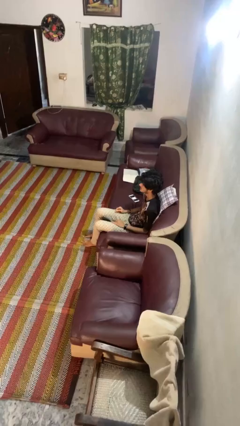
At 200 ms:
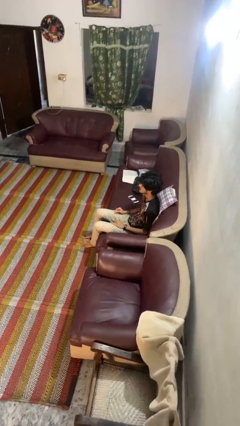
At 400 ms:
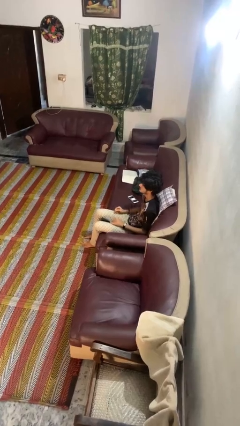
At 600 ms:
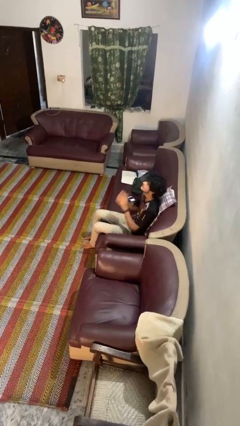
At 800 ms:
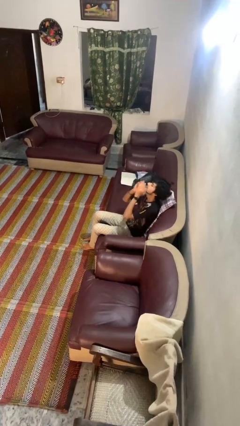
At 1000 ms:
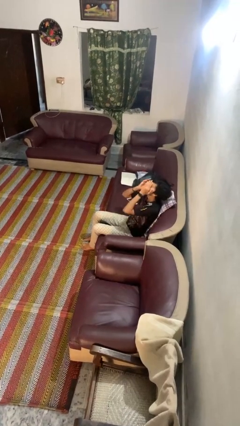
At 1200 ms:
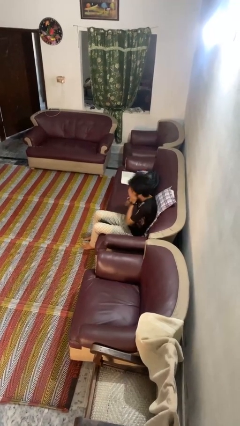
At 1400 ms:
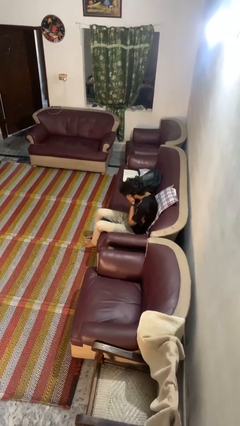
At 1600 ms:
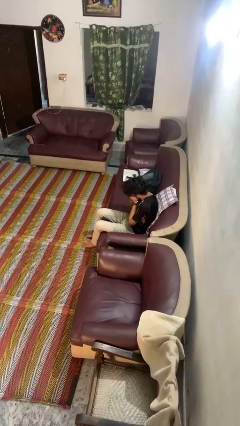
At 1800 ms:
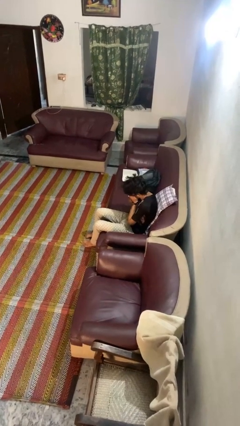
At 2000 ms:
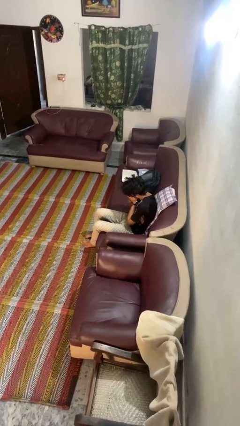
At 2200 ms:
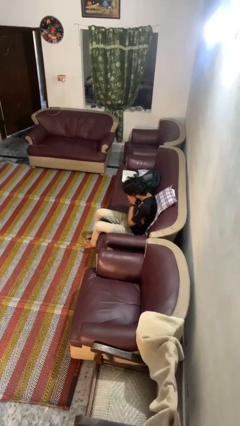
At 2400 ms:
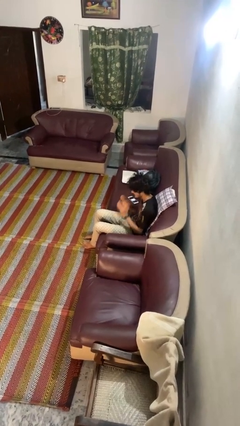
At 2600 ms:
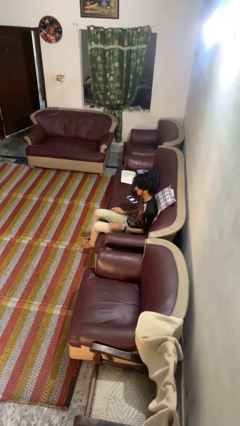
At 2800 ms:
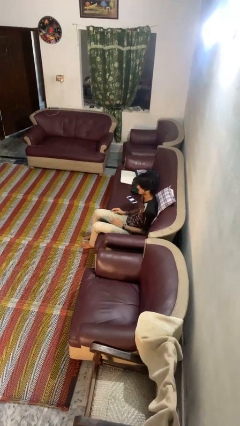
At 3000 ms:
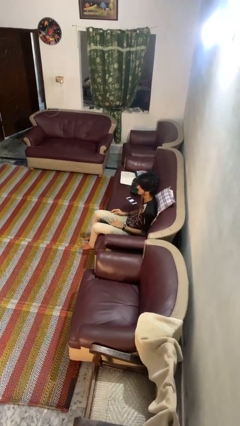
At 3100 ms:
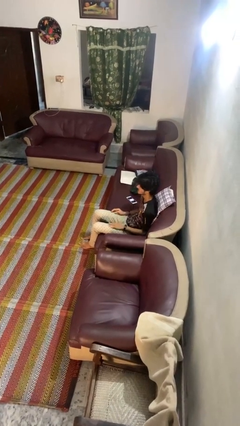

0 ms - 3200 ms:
person sneezes into hand

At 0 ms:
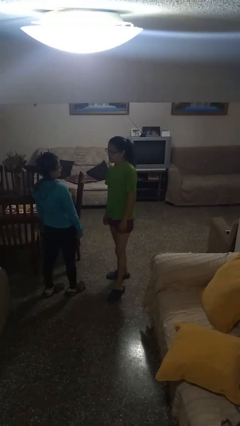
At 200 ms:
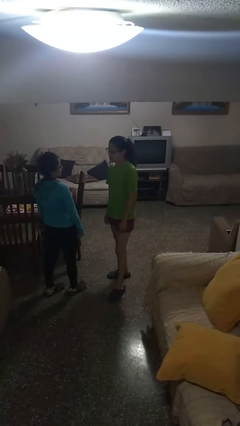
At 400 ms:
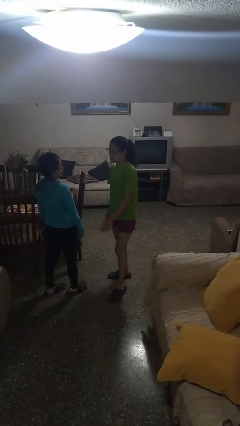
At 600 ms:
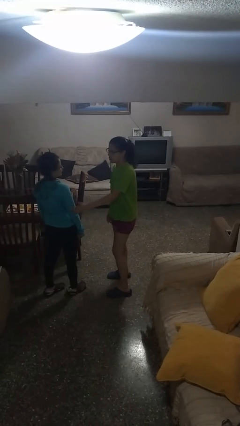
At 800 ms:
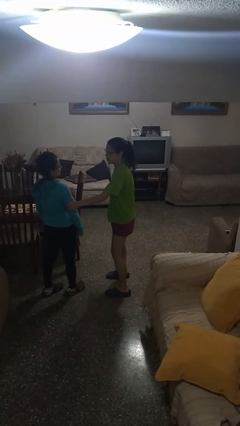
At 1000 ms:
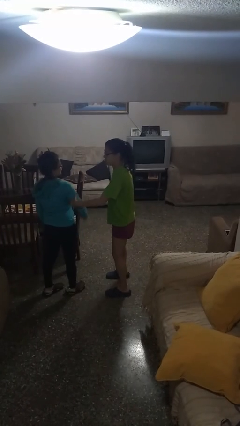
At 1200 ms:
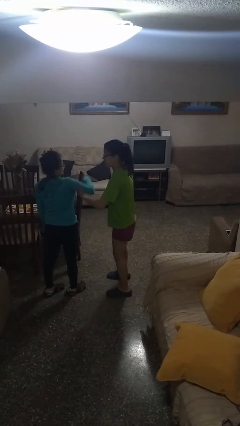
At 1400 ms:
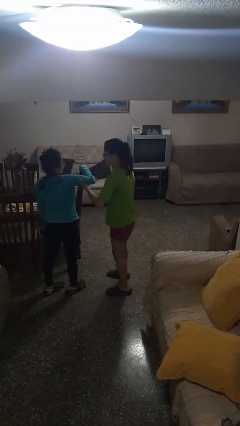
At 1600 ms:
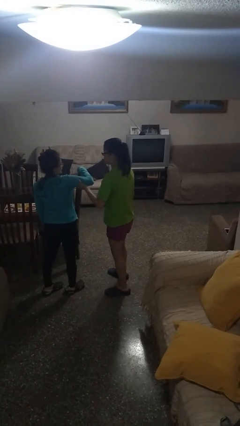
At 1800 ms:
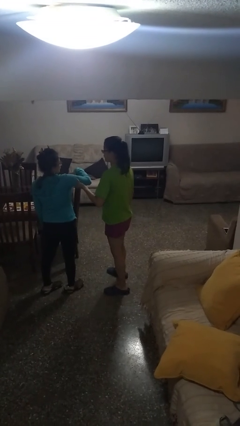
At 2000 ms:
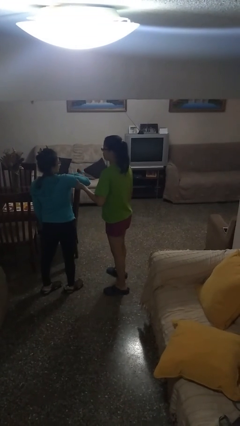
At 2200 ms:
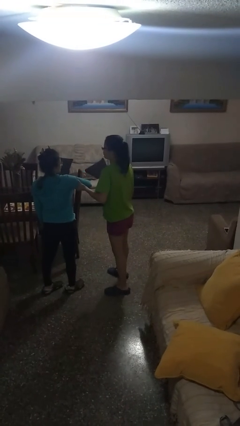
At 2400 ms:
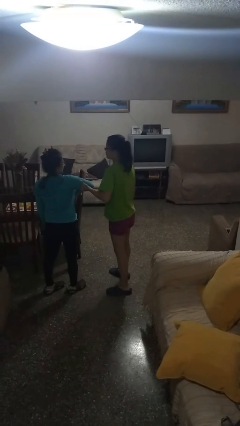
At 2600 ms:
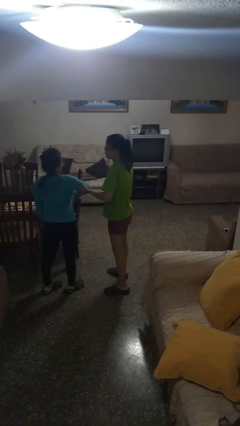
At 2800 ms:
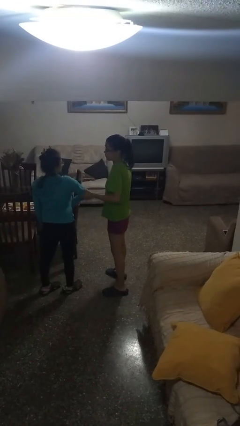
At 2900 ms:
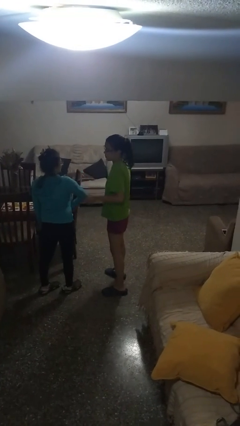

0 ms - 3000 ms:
person grabs person by bicep

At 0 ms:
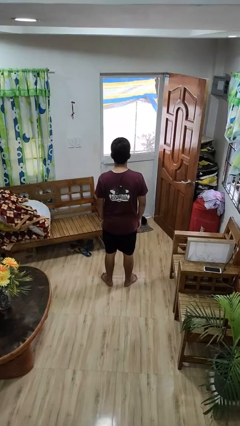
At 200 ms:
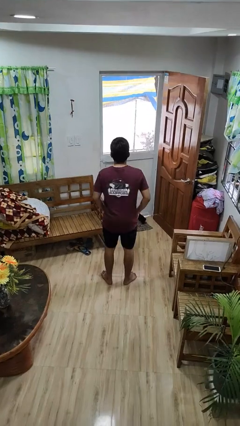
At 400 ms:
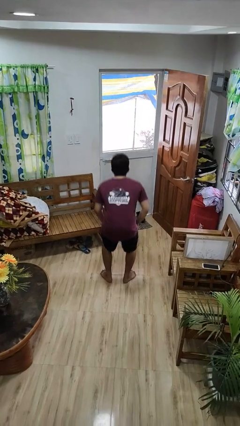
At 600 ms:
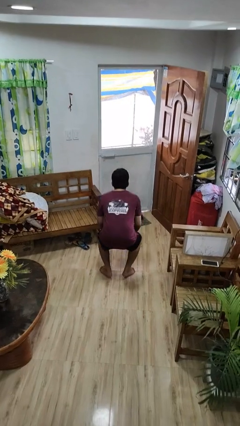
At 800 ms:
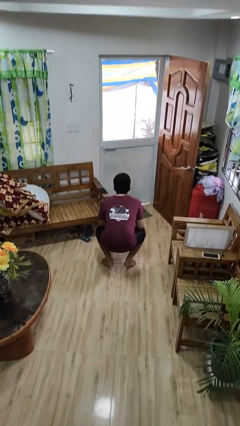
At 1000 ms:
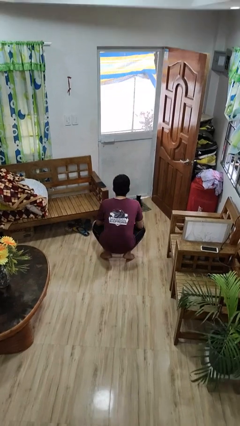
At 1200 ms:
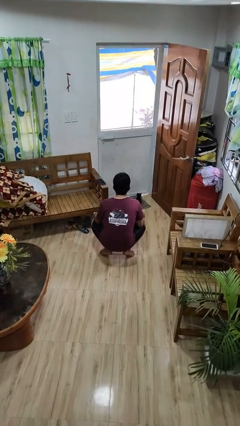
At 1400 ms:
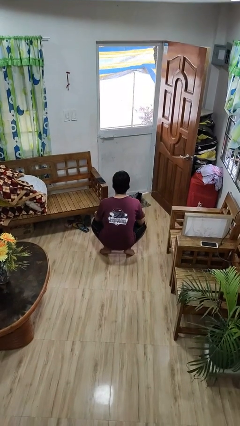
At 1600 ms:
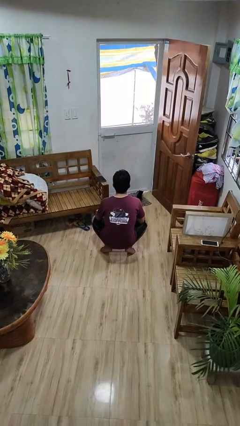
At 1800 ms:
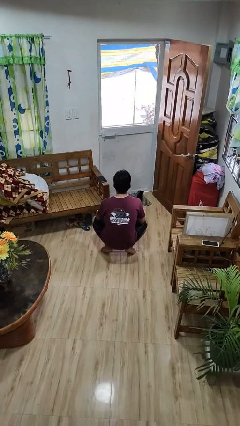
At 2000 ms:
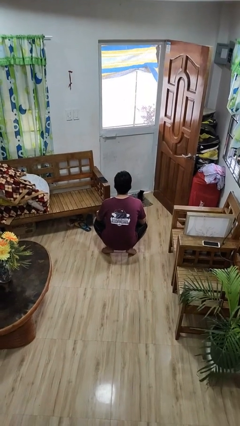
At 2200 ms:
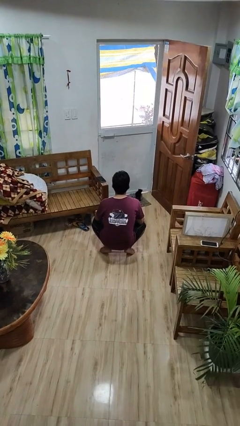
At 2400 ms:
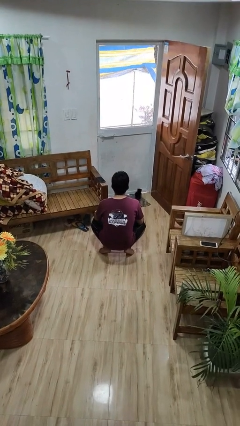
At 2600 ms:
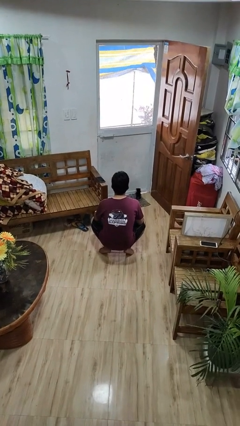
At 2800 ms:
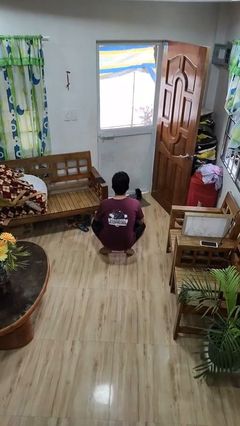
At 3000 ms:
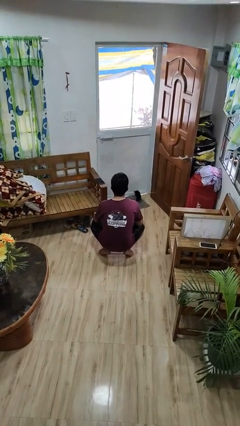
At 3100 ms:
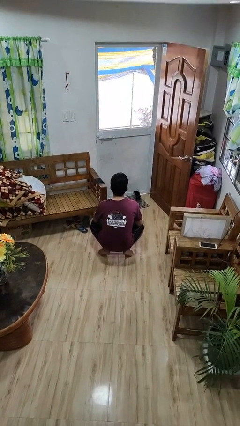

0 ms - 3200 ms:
person squats

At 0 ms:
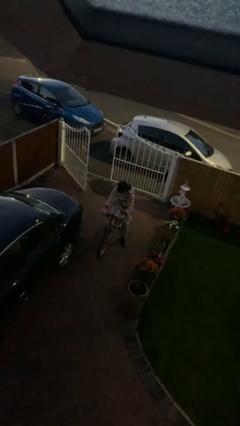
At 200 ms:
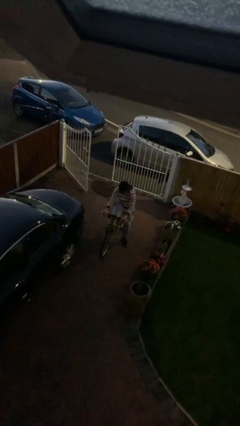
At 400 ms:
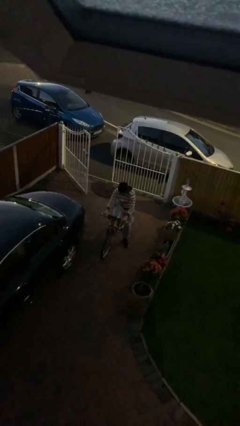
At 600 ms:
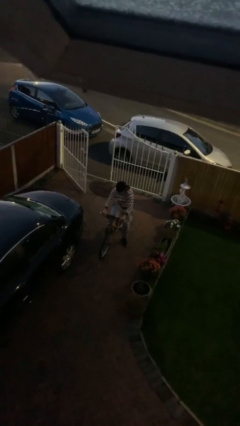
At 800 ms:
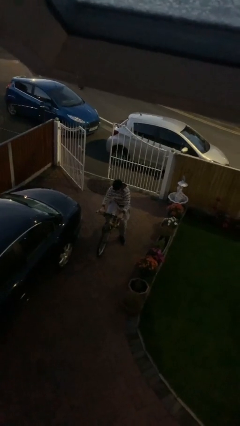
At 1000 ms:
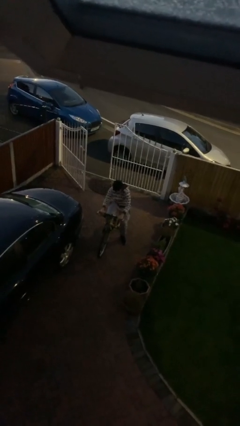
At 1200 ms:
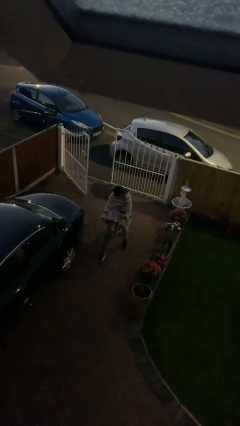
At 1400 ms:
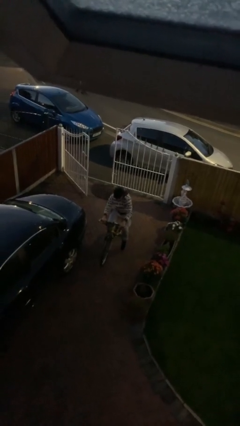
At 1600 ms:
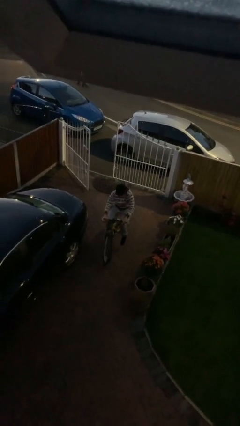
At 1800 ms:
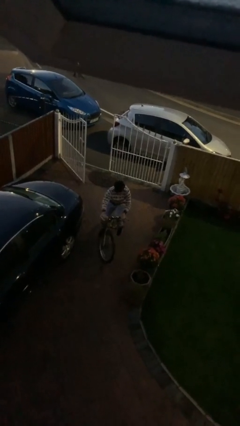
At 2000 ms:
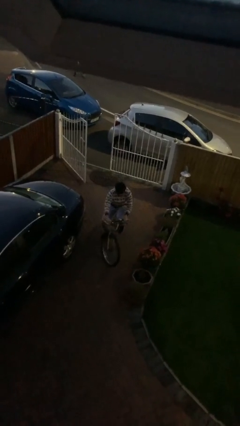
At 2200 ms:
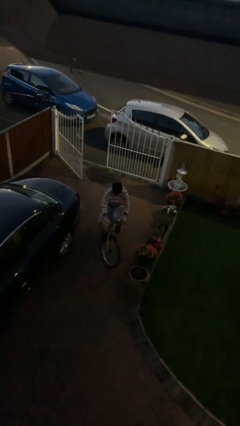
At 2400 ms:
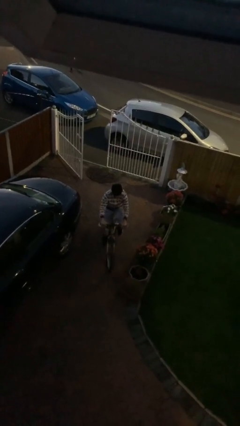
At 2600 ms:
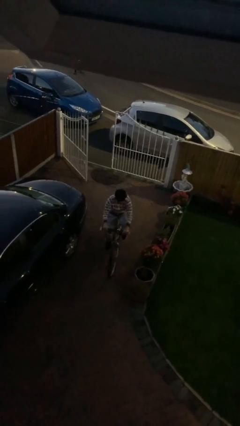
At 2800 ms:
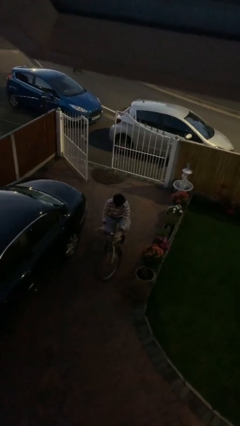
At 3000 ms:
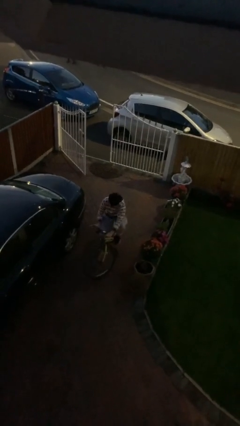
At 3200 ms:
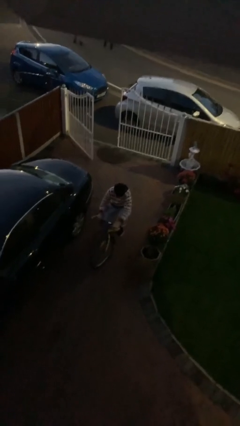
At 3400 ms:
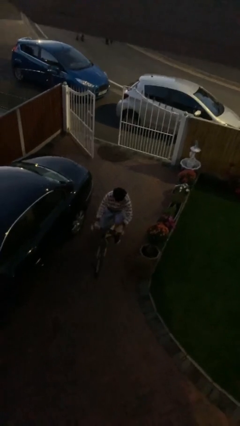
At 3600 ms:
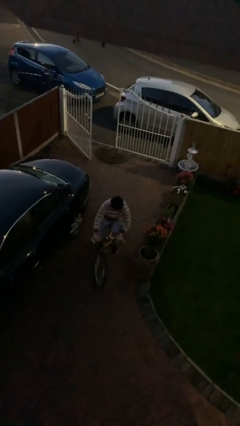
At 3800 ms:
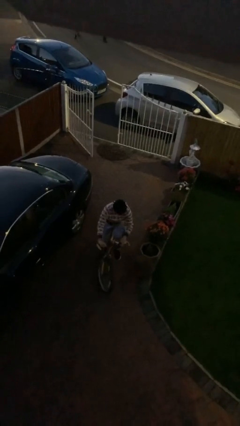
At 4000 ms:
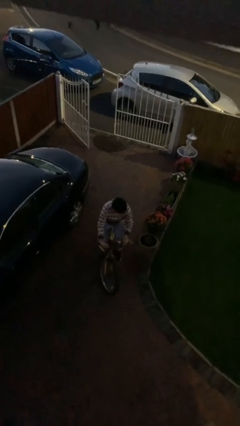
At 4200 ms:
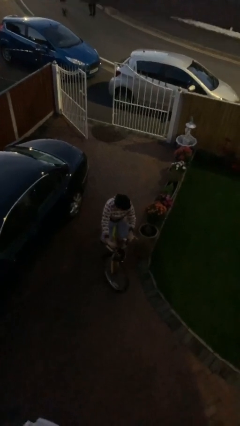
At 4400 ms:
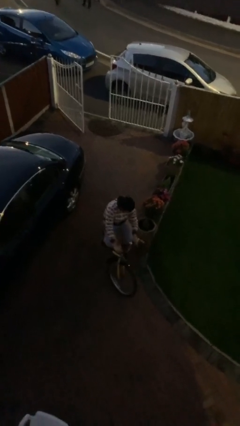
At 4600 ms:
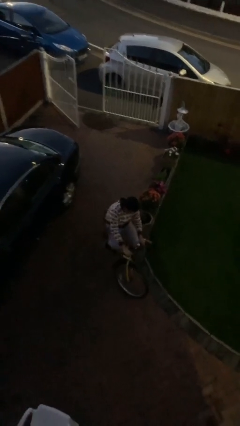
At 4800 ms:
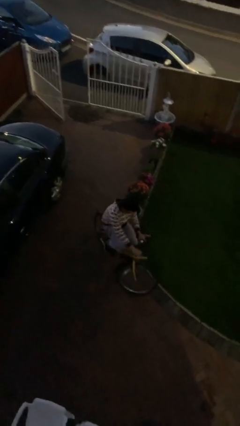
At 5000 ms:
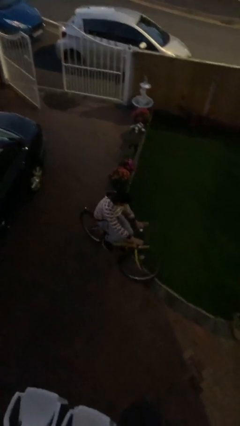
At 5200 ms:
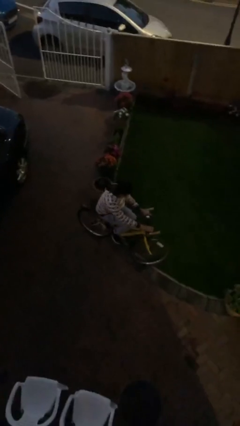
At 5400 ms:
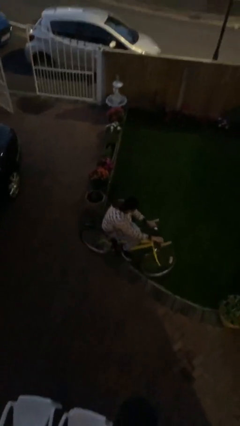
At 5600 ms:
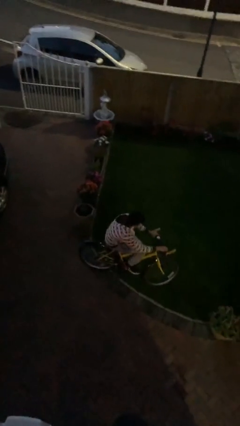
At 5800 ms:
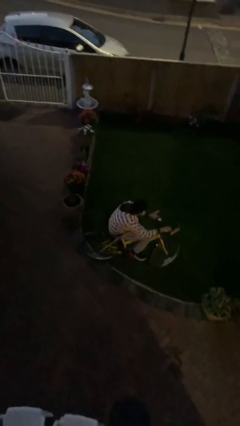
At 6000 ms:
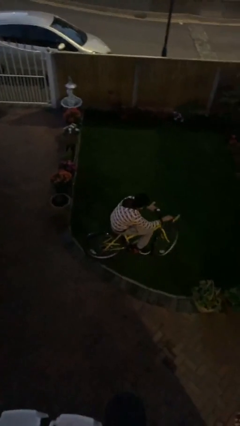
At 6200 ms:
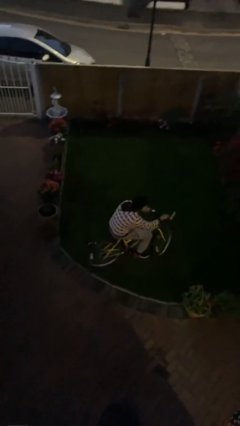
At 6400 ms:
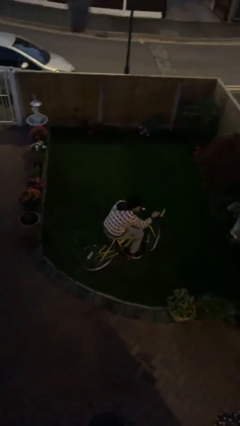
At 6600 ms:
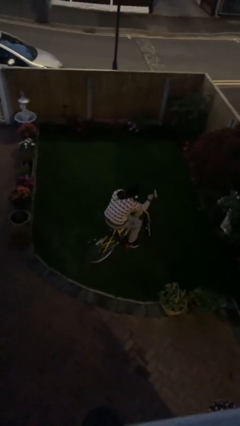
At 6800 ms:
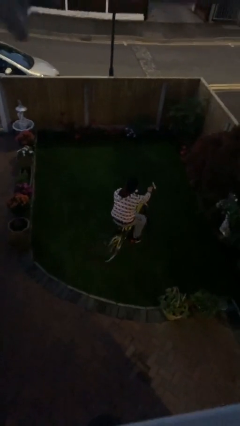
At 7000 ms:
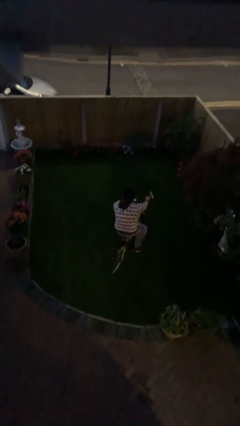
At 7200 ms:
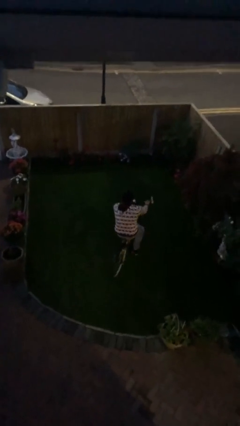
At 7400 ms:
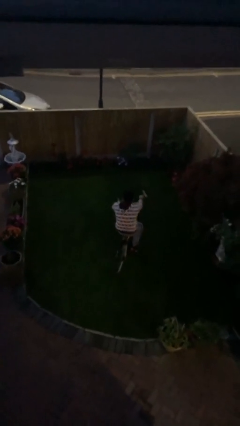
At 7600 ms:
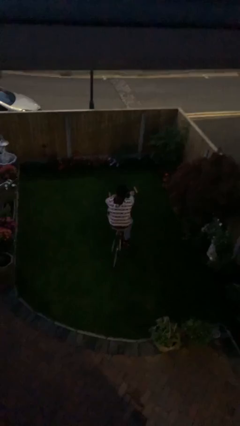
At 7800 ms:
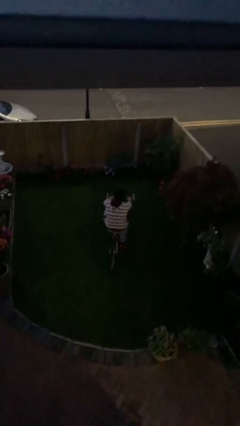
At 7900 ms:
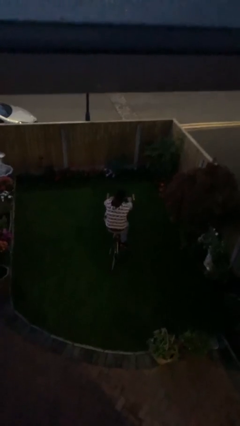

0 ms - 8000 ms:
person rides bicycle

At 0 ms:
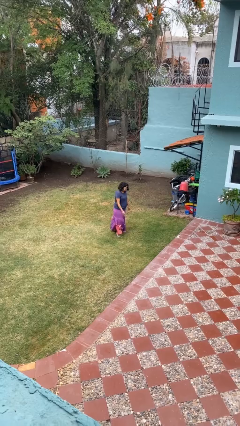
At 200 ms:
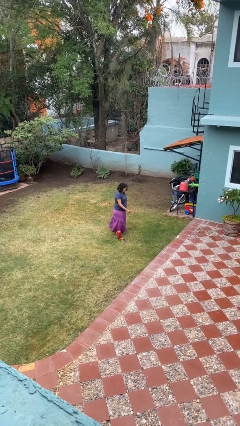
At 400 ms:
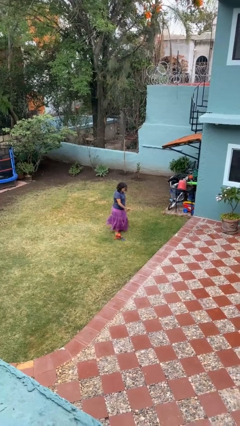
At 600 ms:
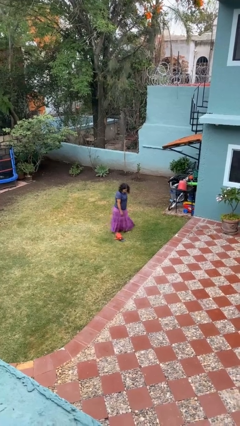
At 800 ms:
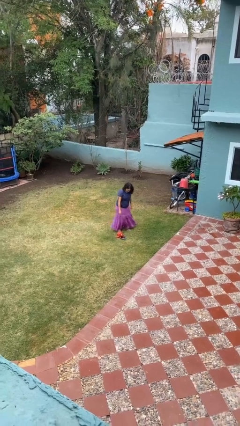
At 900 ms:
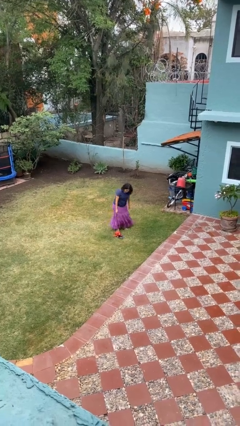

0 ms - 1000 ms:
person drops object
